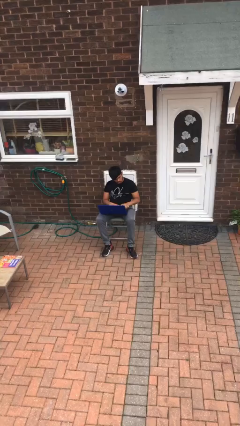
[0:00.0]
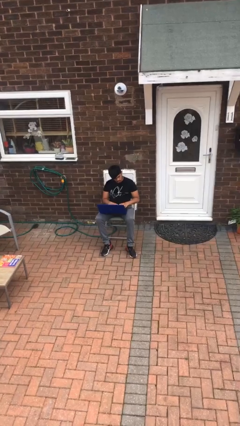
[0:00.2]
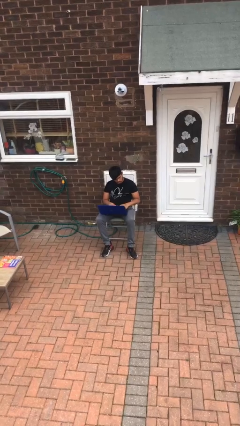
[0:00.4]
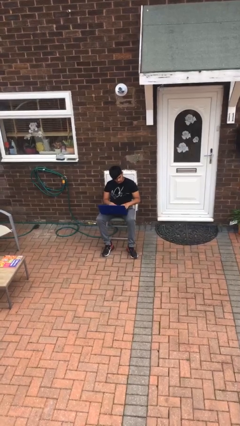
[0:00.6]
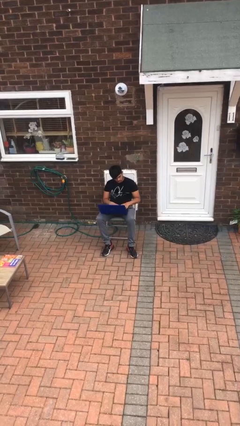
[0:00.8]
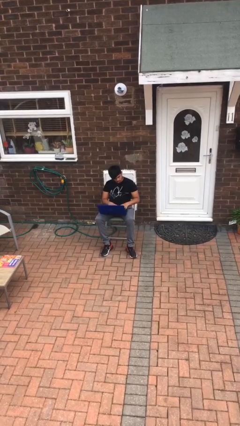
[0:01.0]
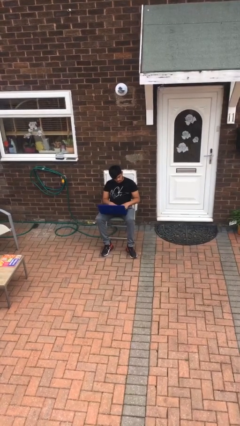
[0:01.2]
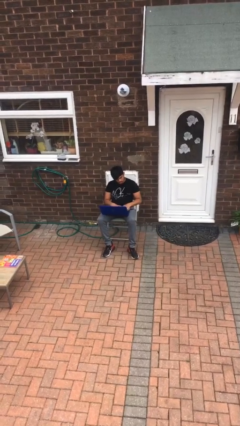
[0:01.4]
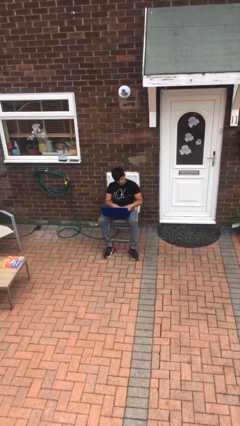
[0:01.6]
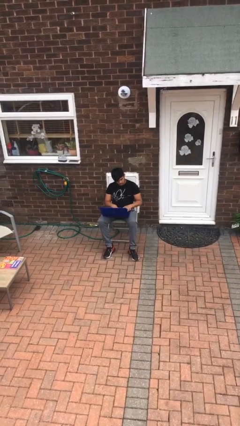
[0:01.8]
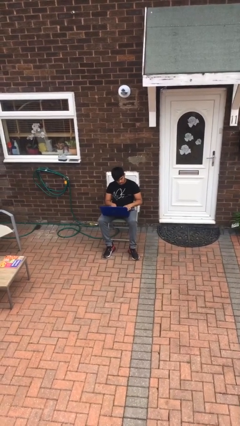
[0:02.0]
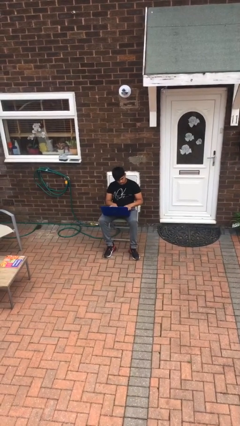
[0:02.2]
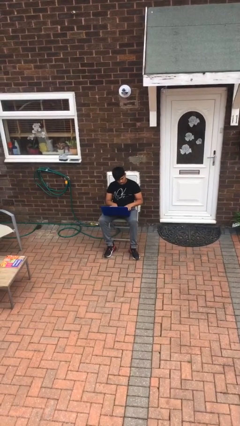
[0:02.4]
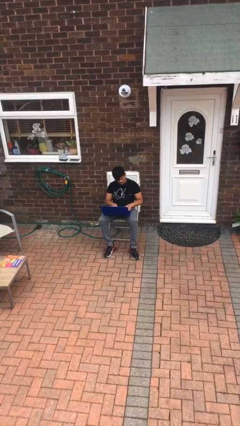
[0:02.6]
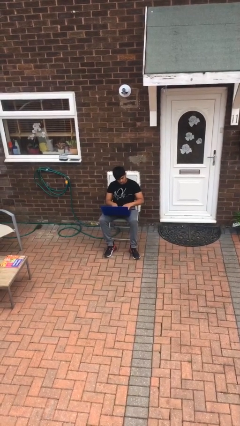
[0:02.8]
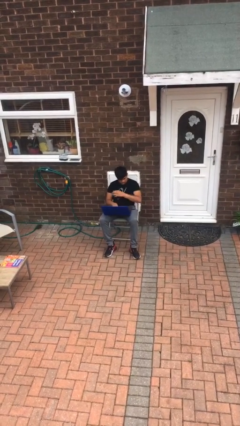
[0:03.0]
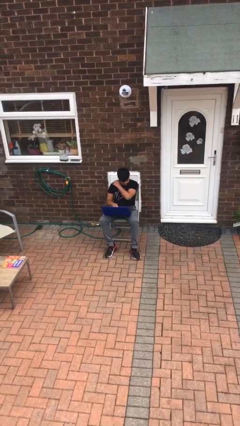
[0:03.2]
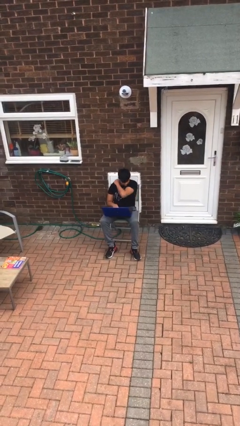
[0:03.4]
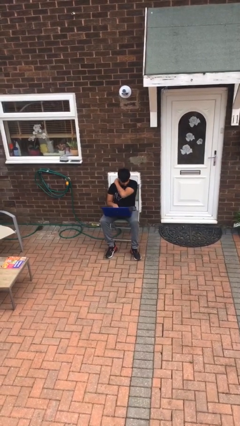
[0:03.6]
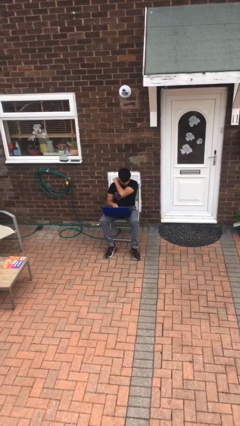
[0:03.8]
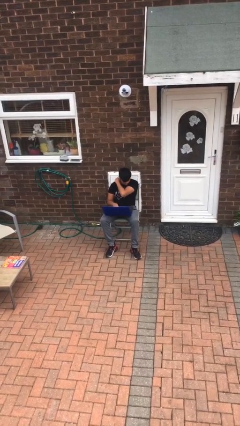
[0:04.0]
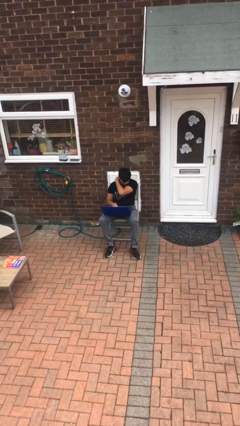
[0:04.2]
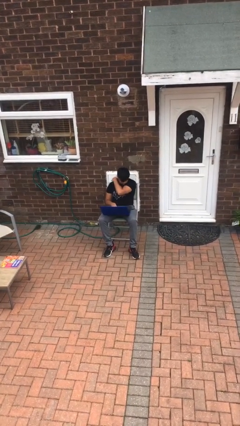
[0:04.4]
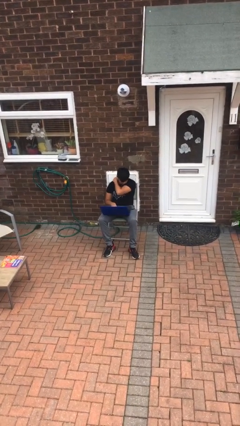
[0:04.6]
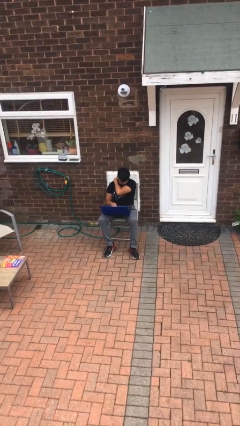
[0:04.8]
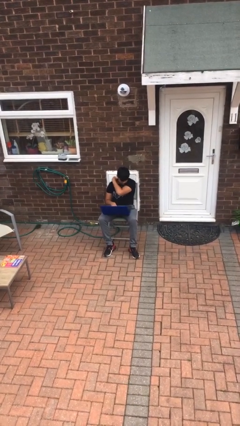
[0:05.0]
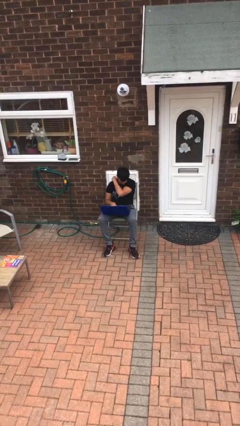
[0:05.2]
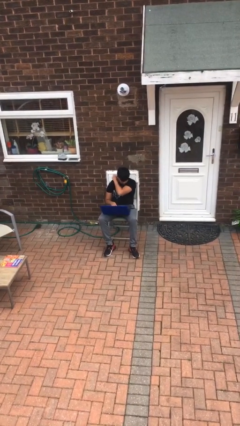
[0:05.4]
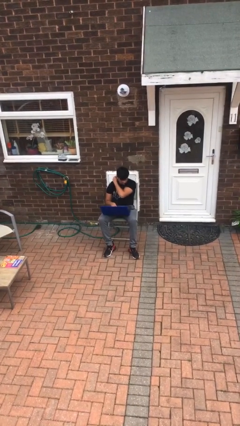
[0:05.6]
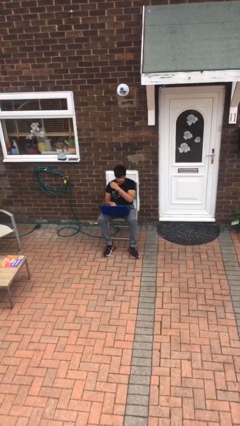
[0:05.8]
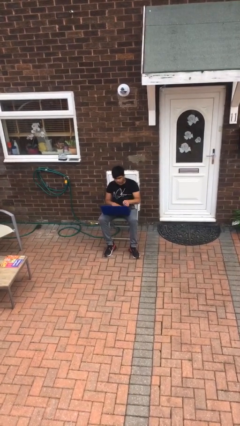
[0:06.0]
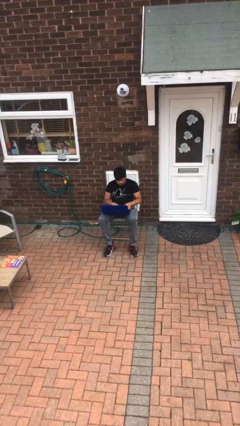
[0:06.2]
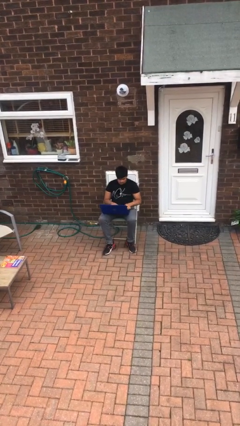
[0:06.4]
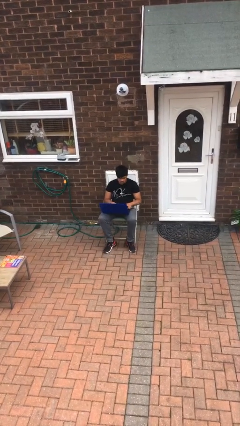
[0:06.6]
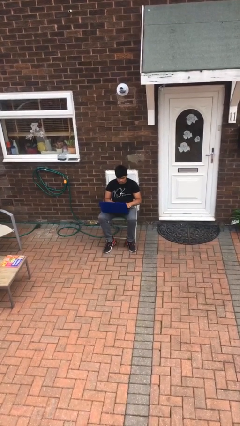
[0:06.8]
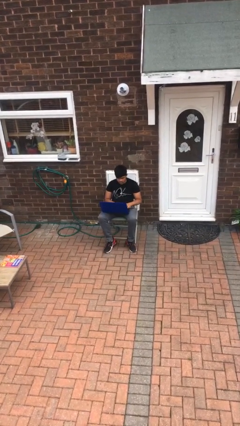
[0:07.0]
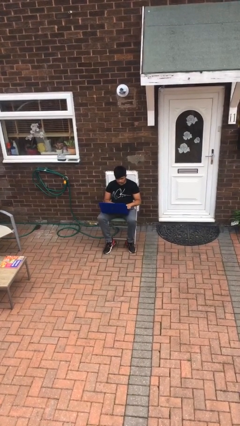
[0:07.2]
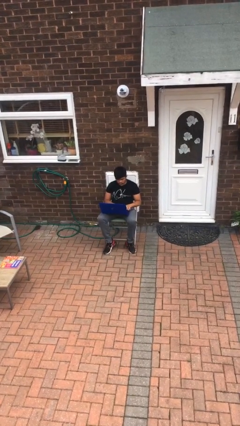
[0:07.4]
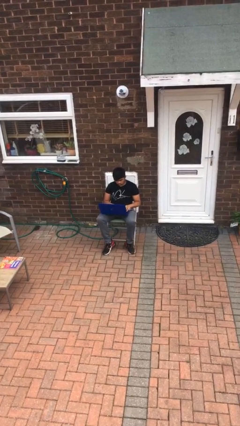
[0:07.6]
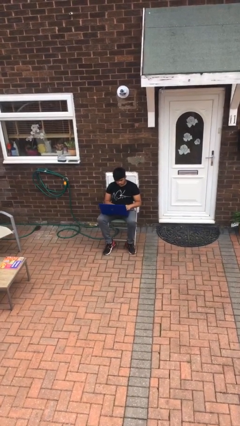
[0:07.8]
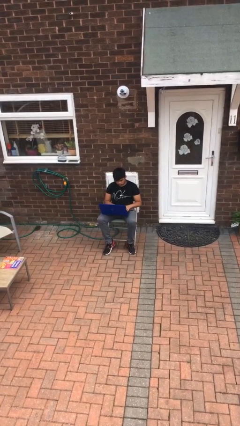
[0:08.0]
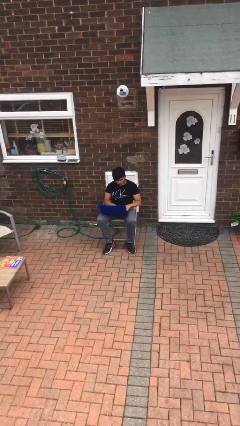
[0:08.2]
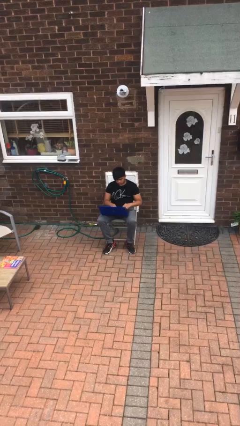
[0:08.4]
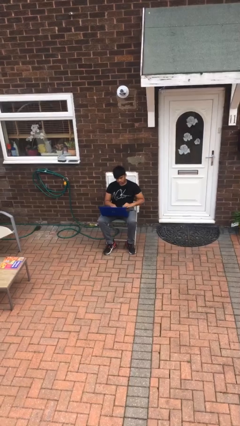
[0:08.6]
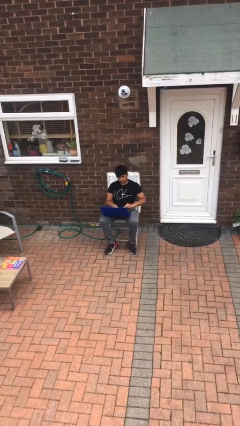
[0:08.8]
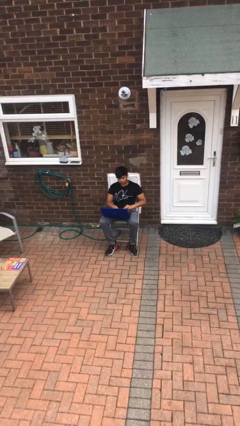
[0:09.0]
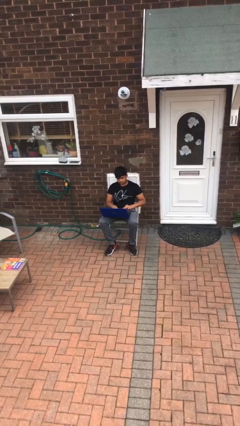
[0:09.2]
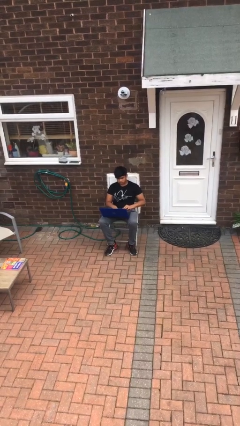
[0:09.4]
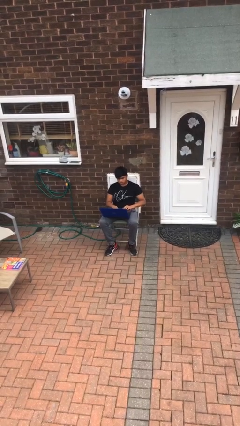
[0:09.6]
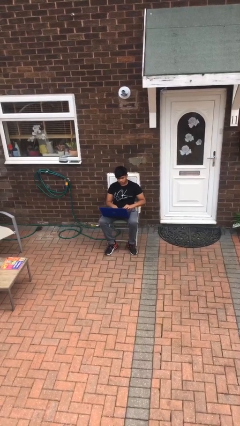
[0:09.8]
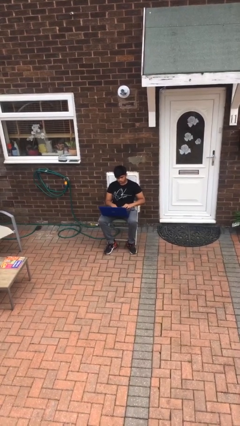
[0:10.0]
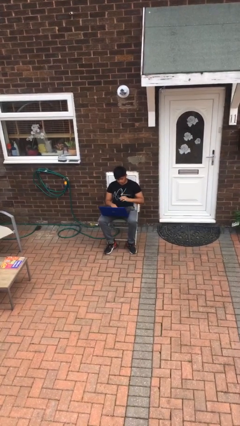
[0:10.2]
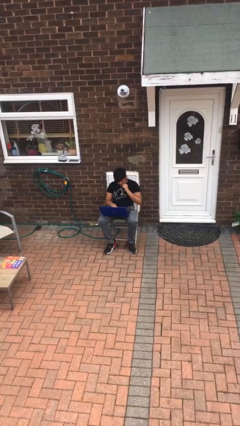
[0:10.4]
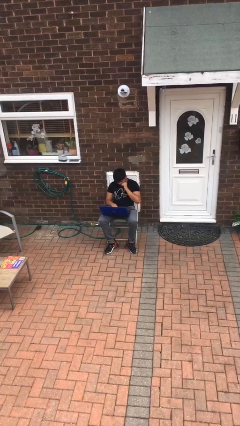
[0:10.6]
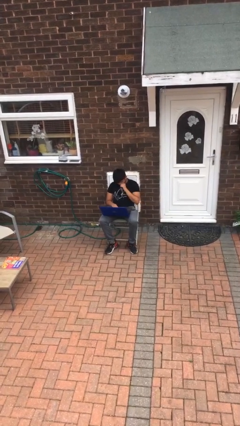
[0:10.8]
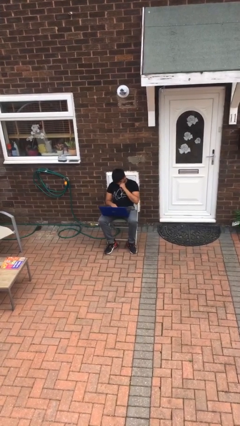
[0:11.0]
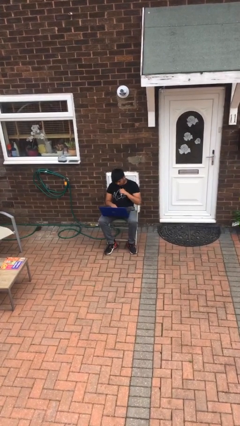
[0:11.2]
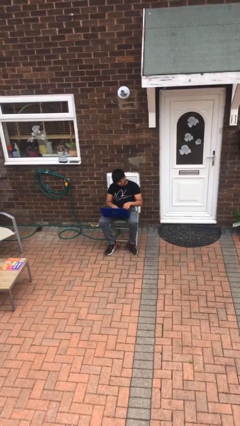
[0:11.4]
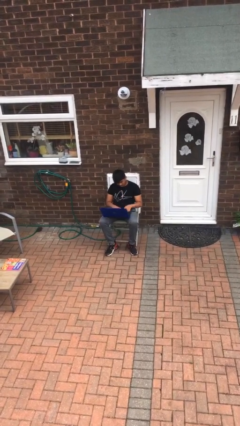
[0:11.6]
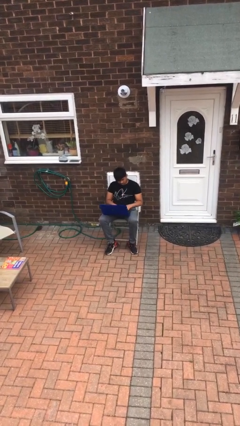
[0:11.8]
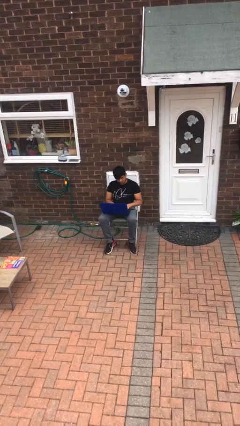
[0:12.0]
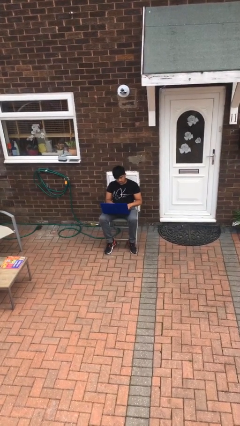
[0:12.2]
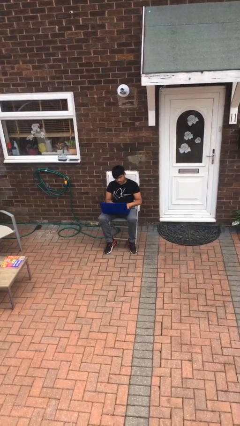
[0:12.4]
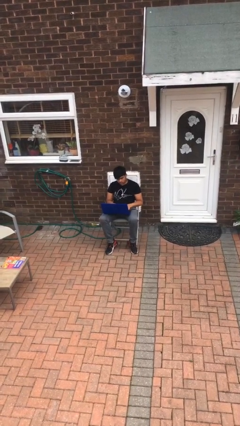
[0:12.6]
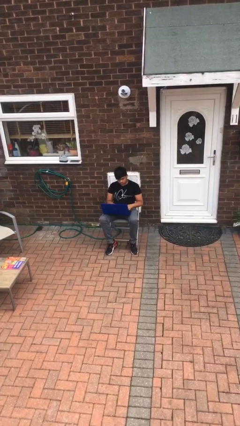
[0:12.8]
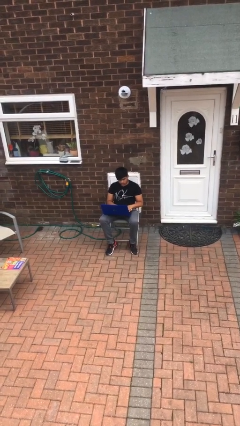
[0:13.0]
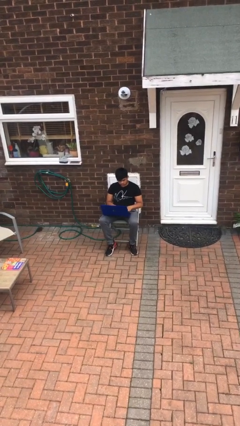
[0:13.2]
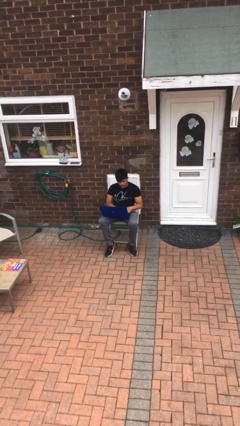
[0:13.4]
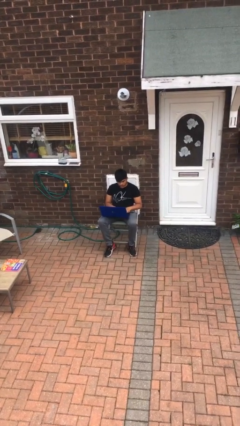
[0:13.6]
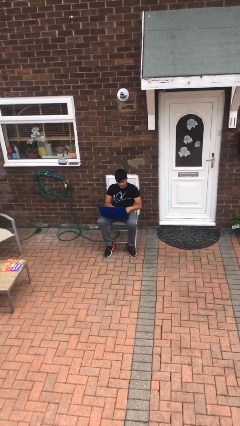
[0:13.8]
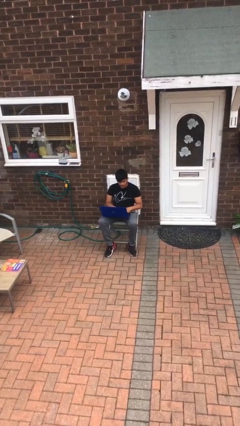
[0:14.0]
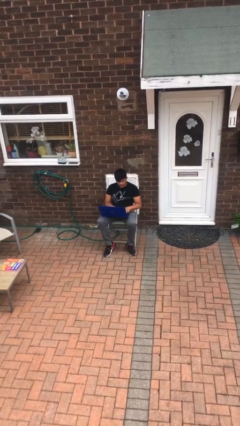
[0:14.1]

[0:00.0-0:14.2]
person interacts with laptop

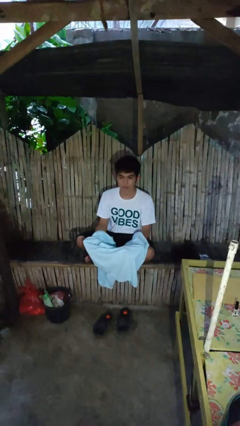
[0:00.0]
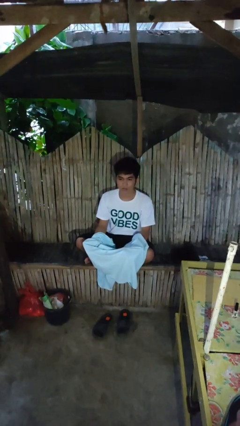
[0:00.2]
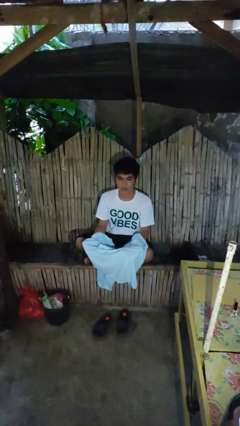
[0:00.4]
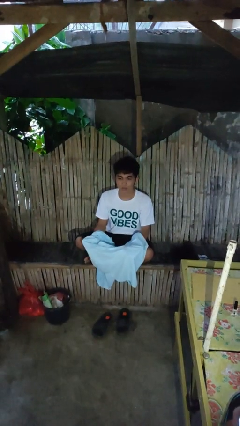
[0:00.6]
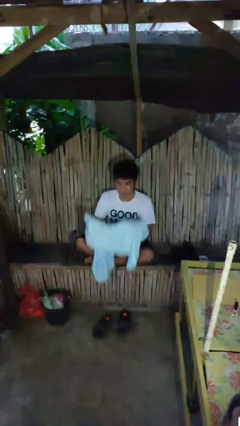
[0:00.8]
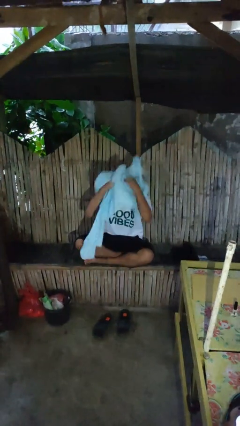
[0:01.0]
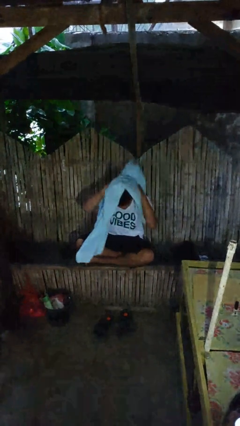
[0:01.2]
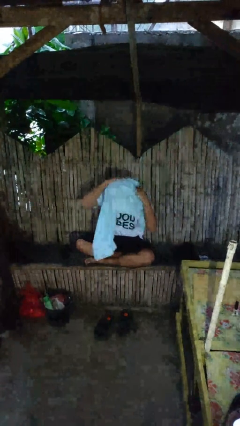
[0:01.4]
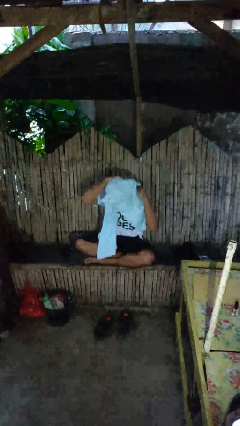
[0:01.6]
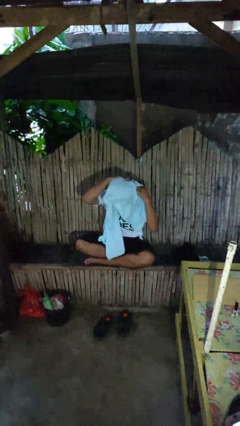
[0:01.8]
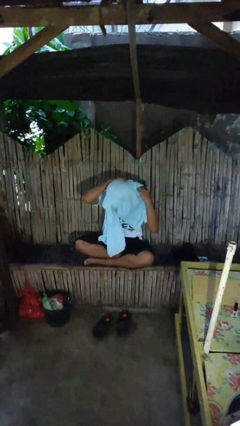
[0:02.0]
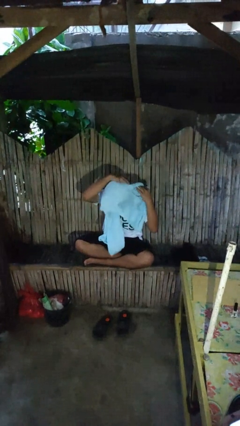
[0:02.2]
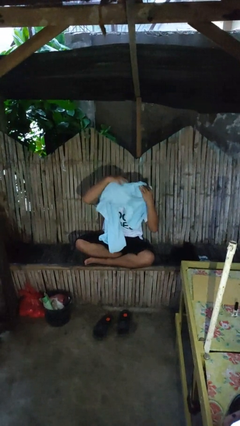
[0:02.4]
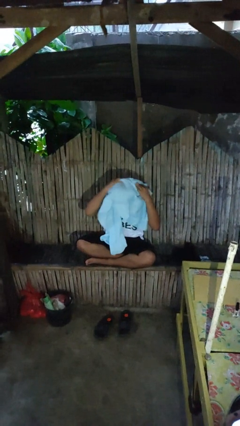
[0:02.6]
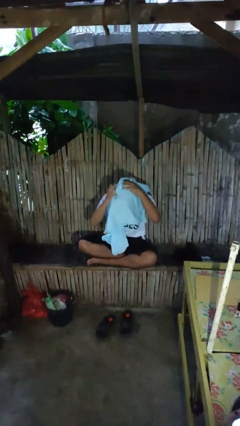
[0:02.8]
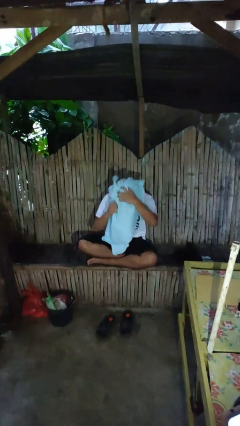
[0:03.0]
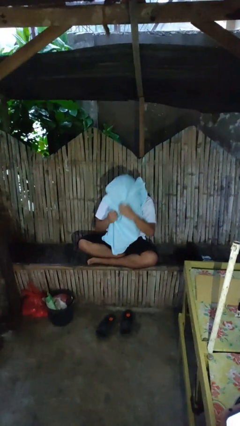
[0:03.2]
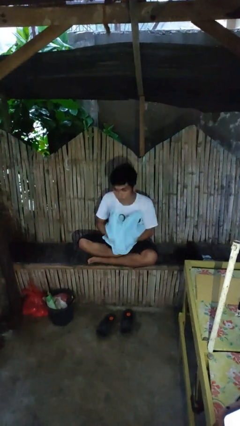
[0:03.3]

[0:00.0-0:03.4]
person dries hair with hairdryer

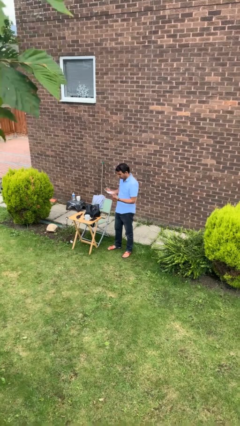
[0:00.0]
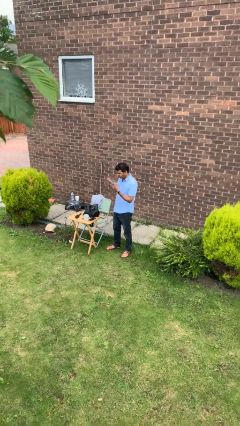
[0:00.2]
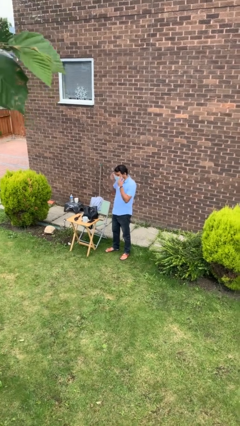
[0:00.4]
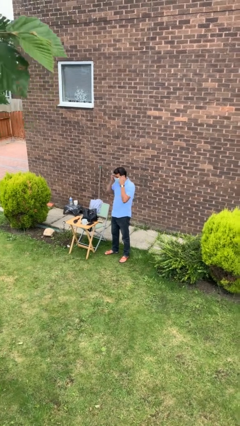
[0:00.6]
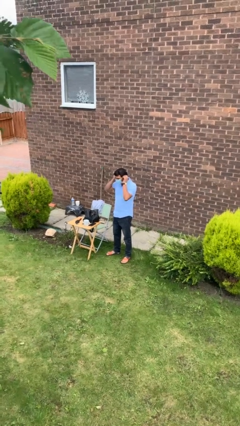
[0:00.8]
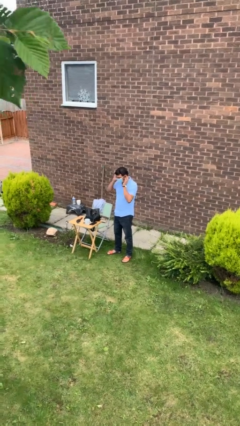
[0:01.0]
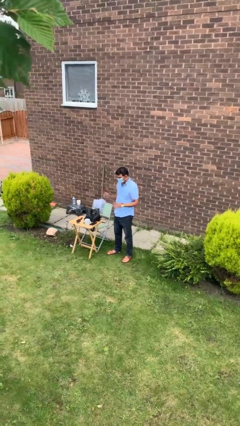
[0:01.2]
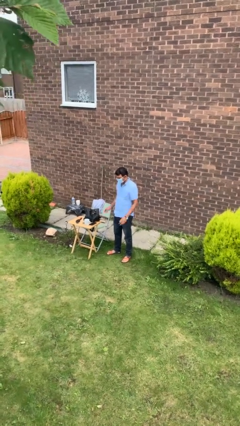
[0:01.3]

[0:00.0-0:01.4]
person puts on facemask
